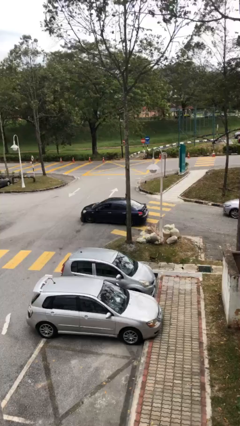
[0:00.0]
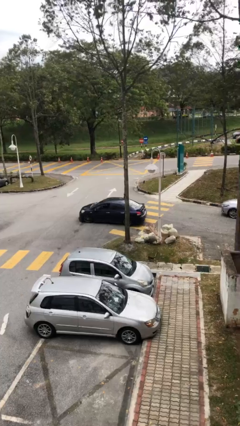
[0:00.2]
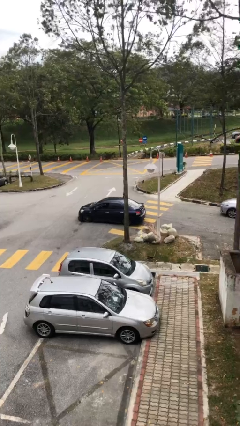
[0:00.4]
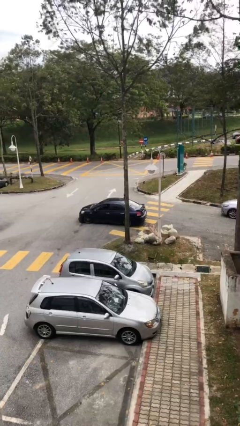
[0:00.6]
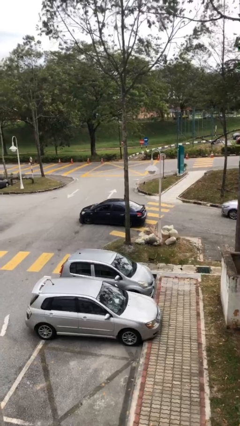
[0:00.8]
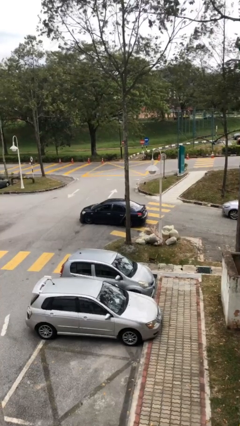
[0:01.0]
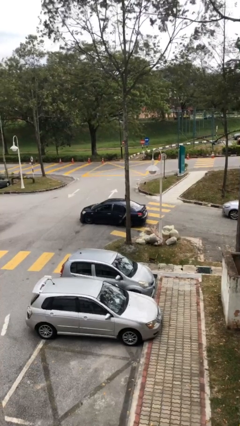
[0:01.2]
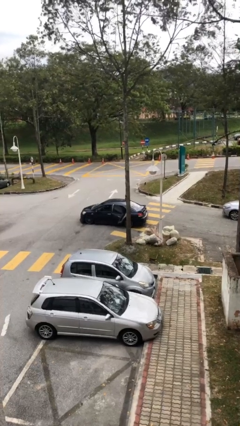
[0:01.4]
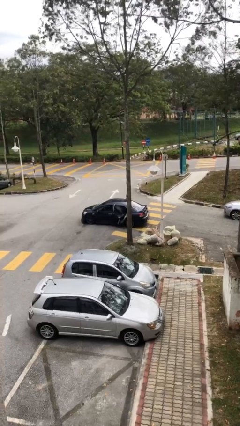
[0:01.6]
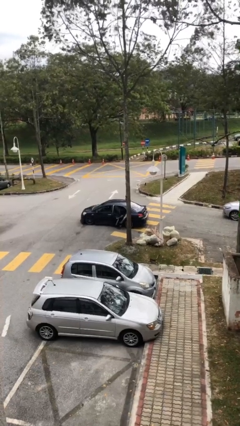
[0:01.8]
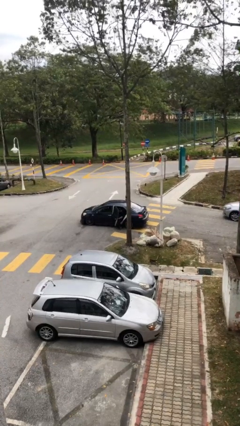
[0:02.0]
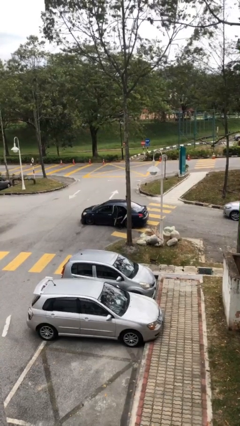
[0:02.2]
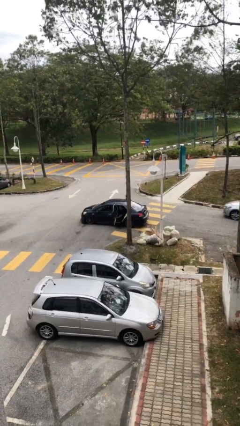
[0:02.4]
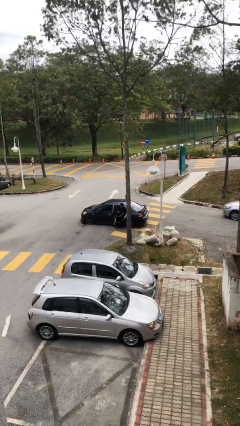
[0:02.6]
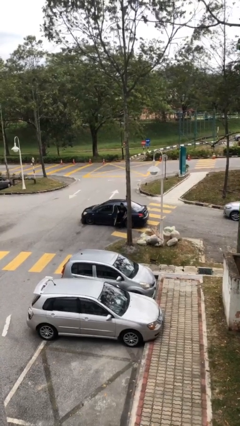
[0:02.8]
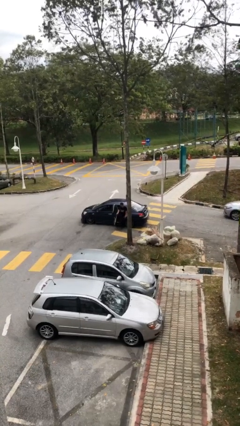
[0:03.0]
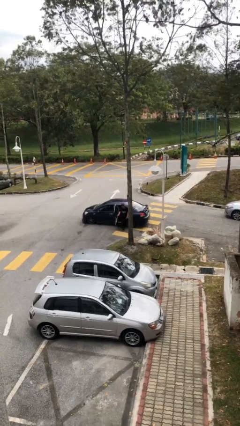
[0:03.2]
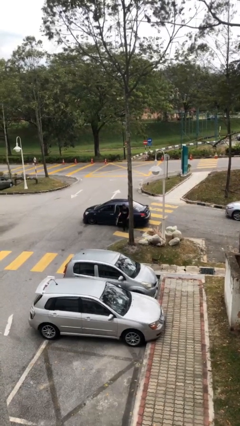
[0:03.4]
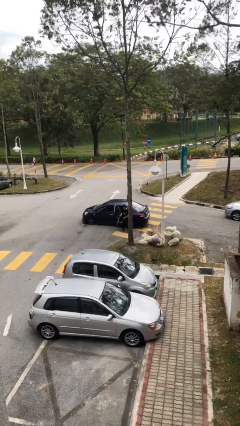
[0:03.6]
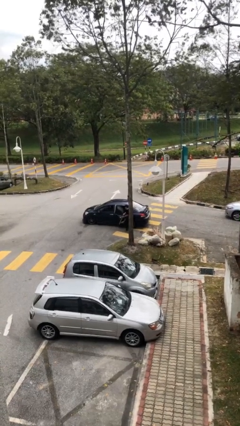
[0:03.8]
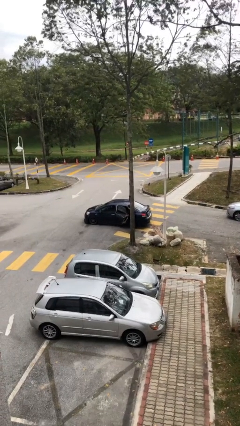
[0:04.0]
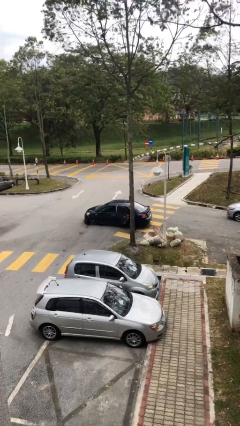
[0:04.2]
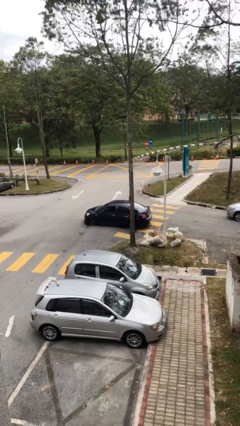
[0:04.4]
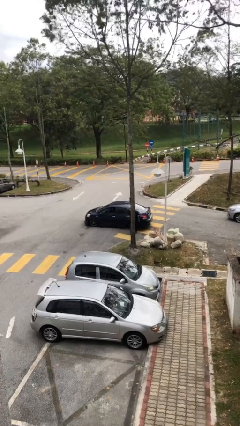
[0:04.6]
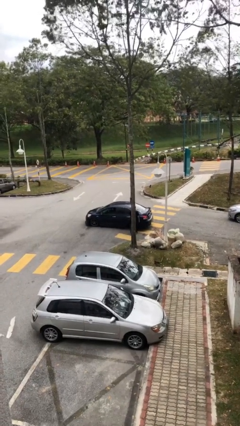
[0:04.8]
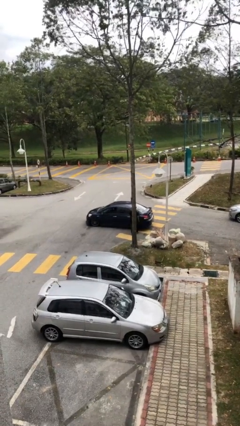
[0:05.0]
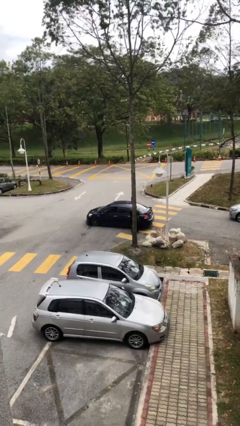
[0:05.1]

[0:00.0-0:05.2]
car drops off person

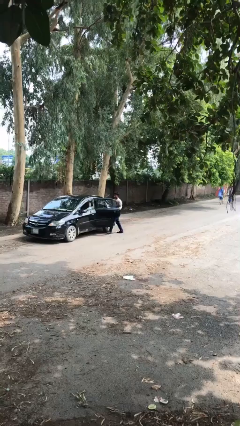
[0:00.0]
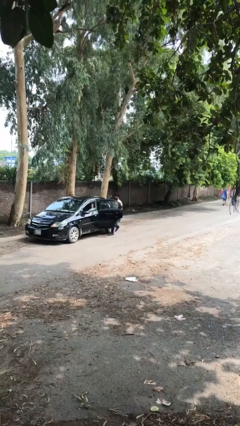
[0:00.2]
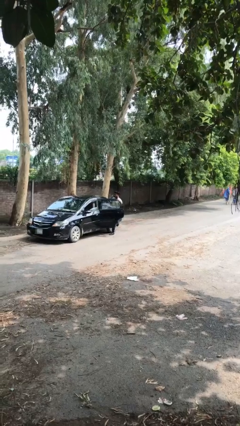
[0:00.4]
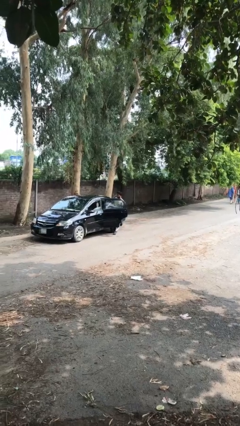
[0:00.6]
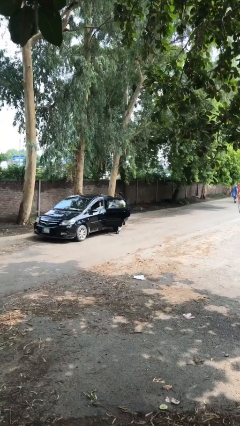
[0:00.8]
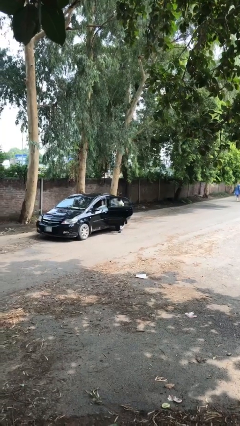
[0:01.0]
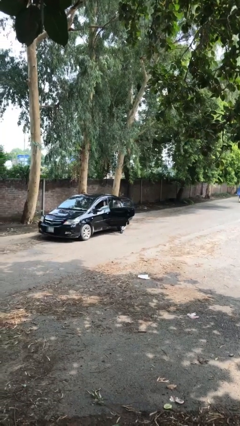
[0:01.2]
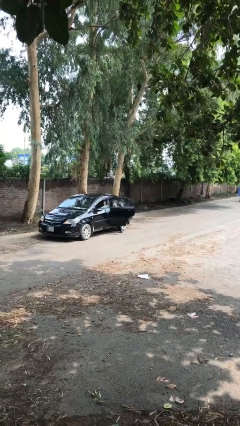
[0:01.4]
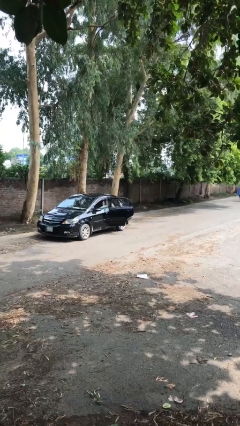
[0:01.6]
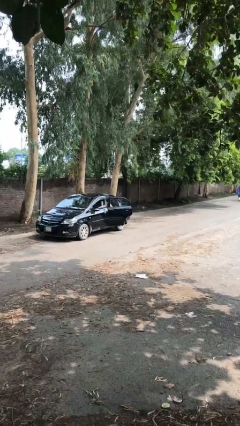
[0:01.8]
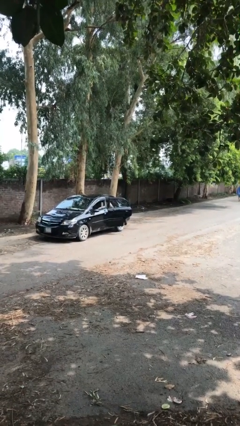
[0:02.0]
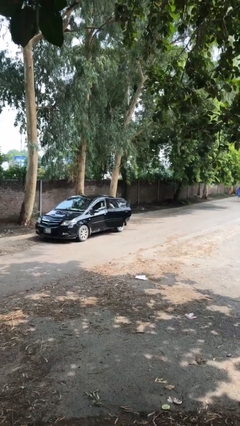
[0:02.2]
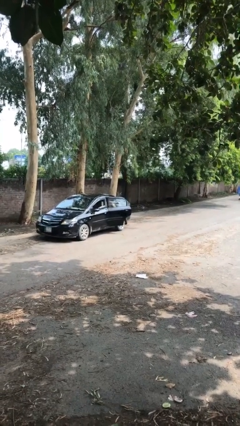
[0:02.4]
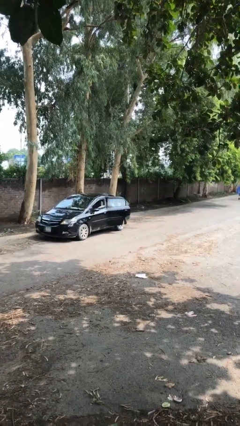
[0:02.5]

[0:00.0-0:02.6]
person enters car

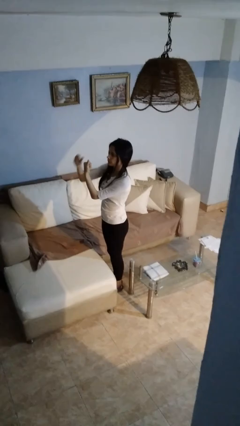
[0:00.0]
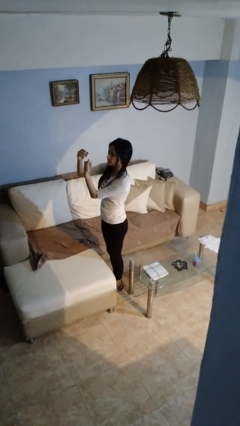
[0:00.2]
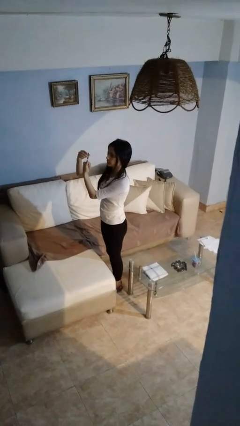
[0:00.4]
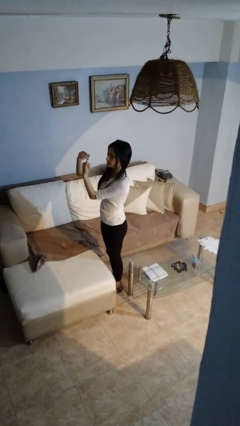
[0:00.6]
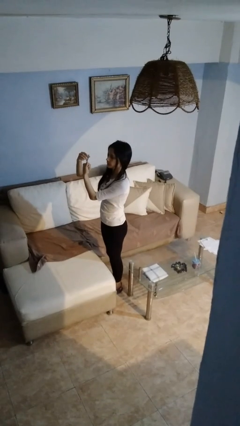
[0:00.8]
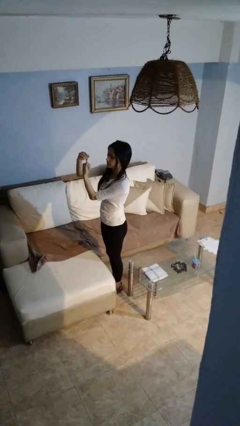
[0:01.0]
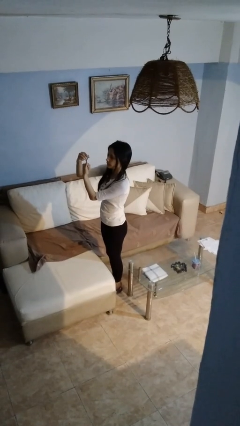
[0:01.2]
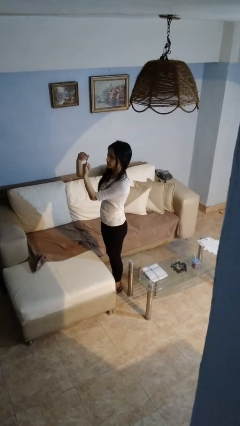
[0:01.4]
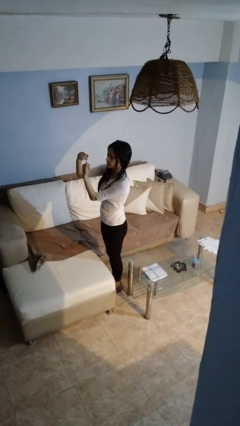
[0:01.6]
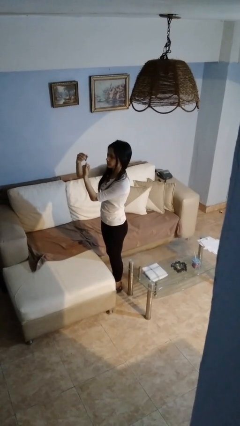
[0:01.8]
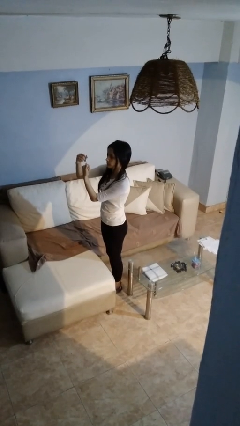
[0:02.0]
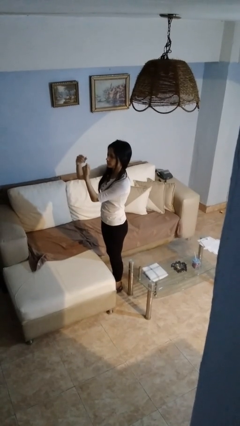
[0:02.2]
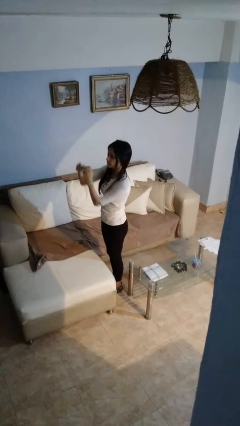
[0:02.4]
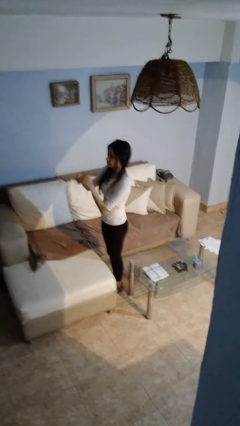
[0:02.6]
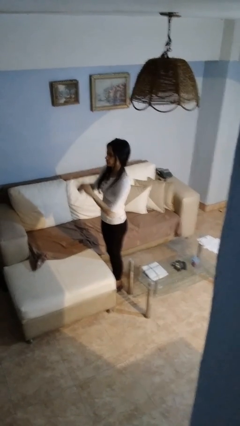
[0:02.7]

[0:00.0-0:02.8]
person clips fingernails

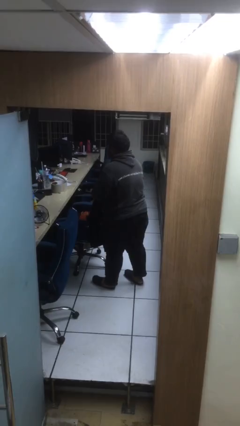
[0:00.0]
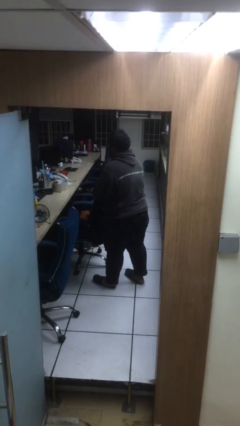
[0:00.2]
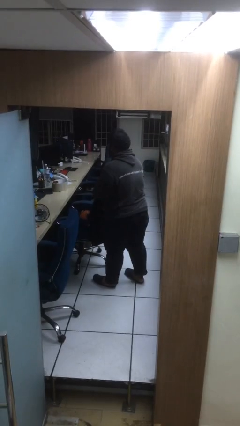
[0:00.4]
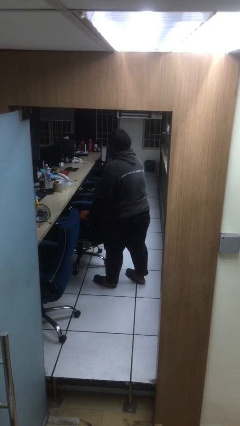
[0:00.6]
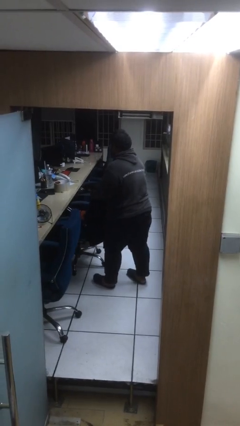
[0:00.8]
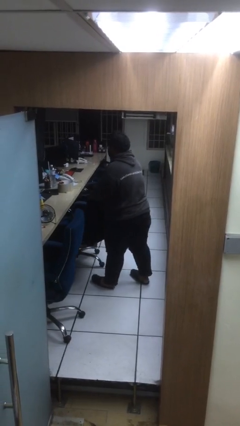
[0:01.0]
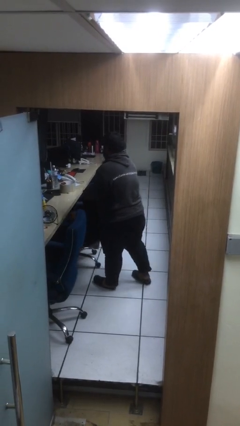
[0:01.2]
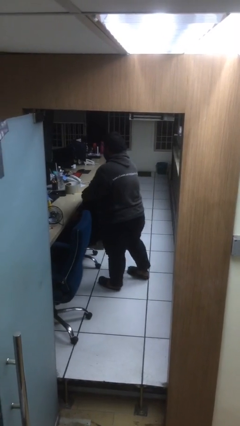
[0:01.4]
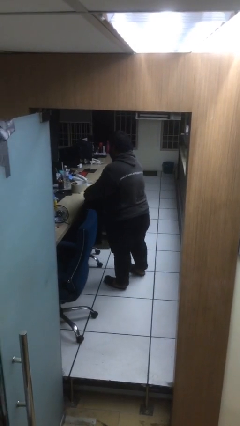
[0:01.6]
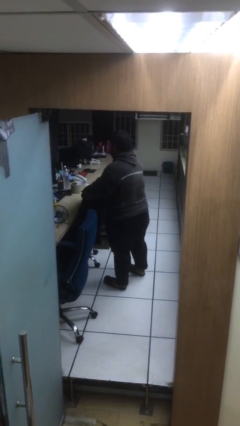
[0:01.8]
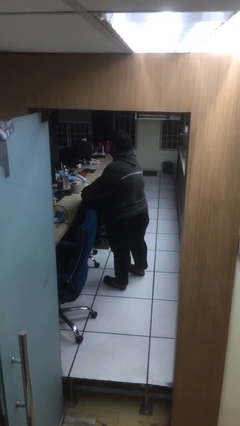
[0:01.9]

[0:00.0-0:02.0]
person pushes in chair

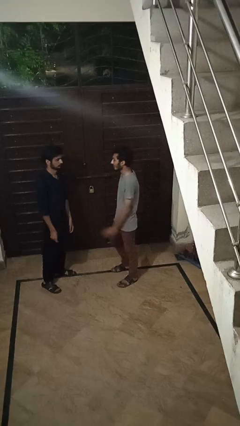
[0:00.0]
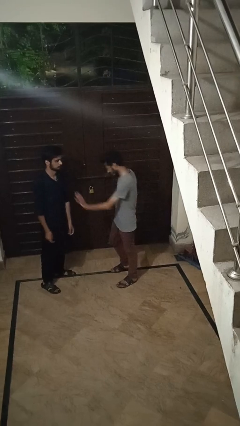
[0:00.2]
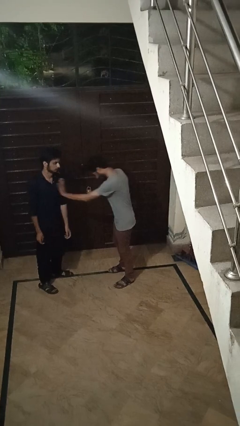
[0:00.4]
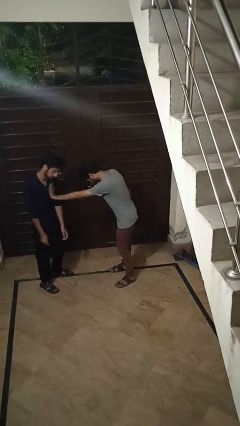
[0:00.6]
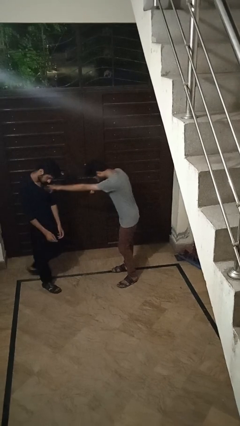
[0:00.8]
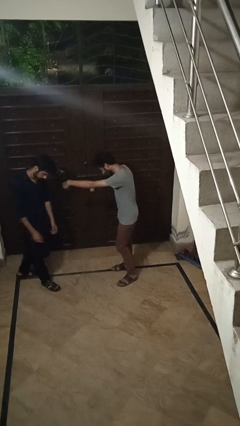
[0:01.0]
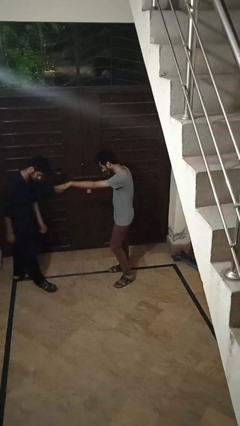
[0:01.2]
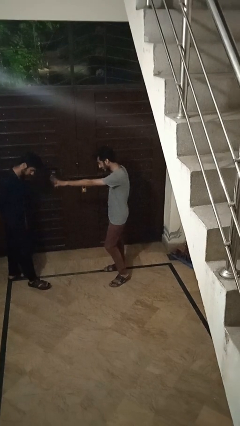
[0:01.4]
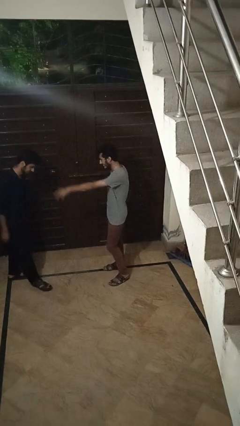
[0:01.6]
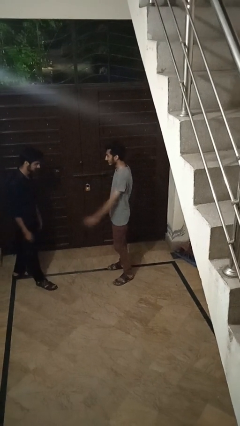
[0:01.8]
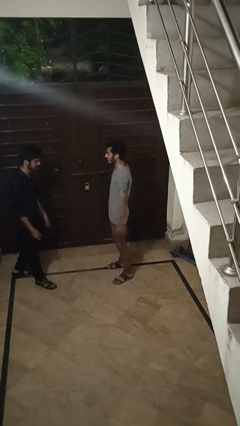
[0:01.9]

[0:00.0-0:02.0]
person shoves person

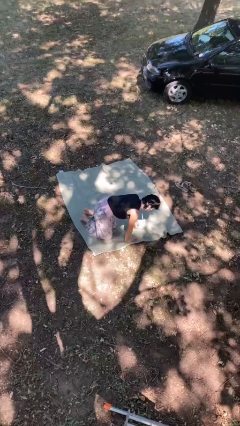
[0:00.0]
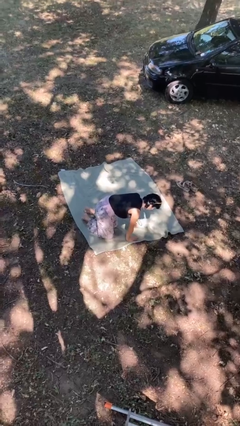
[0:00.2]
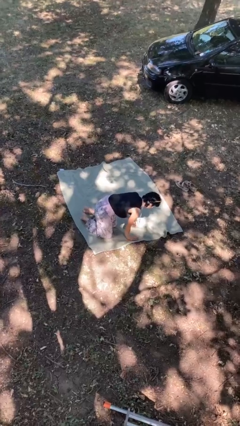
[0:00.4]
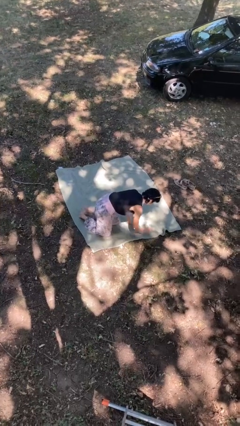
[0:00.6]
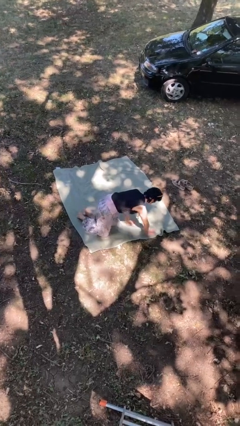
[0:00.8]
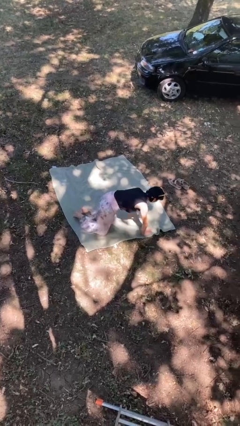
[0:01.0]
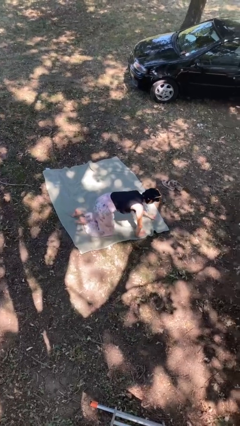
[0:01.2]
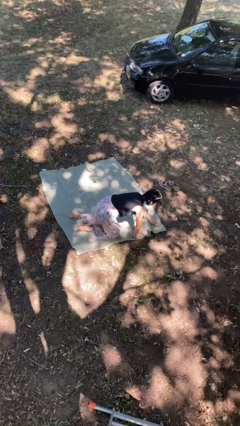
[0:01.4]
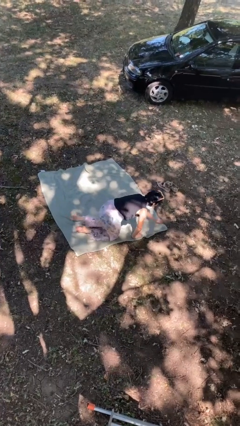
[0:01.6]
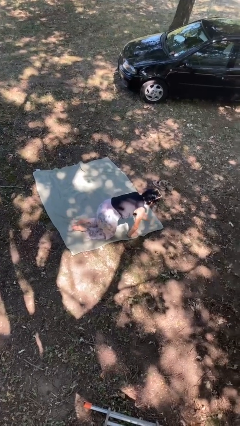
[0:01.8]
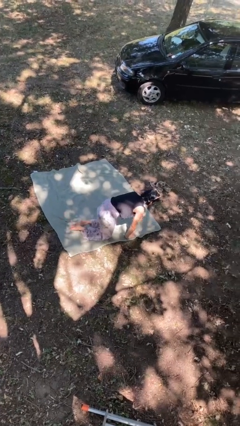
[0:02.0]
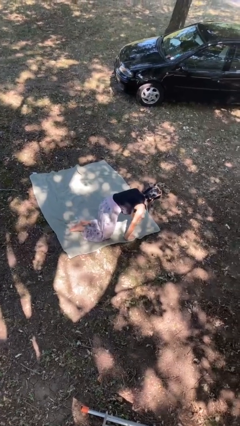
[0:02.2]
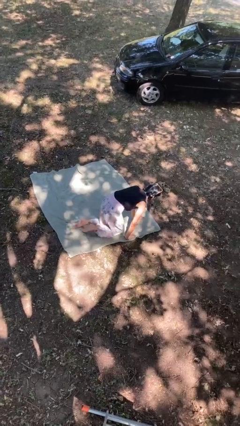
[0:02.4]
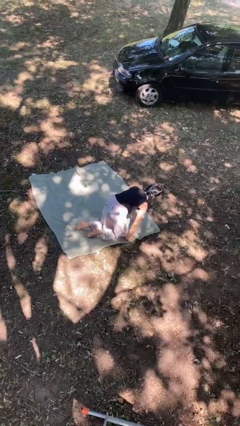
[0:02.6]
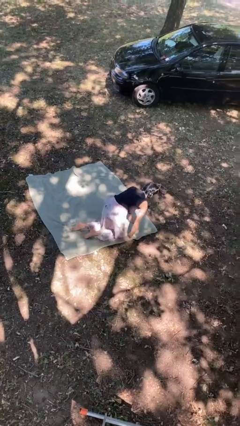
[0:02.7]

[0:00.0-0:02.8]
person crawls

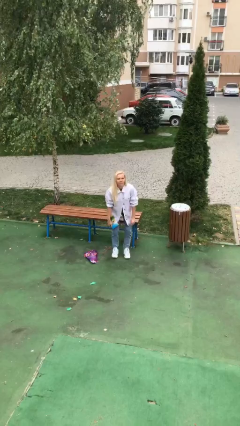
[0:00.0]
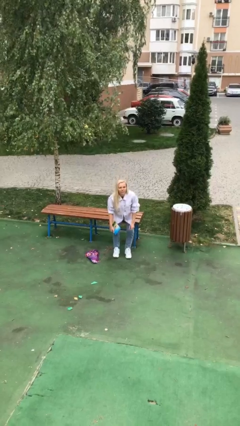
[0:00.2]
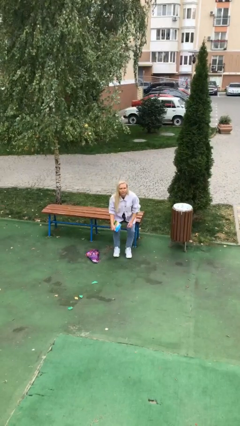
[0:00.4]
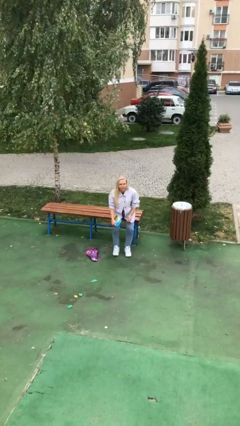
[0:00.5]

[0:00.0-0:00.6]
person sits down
